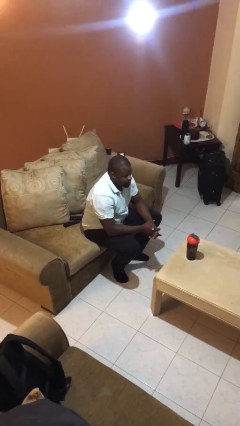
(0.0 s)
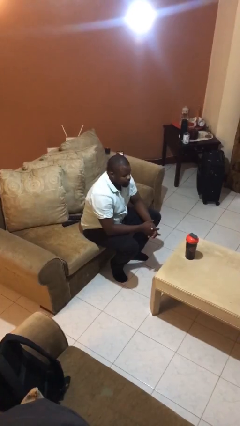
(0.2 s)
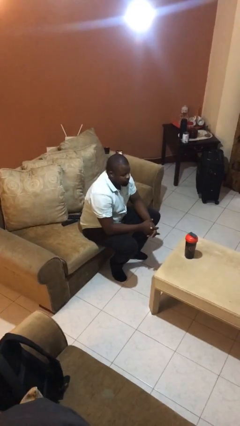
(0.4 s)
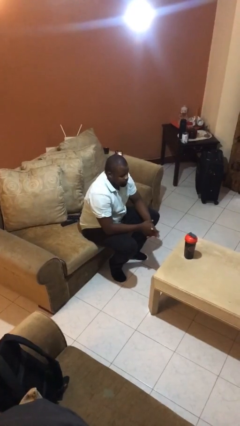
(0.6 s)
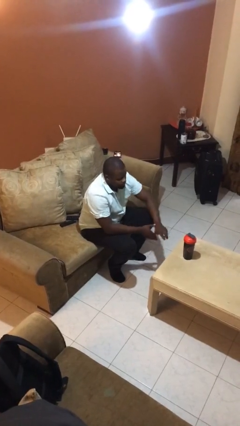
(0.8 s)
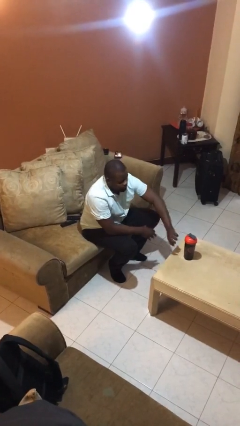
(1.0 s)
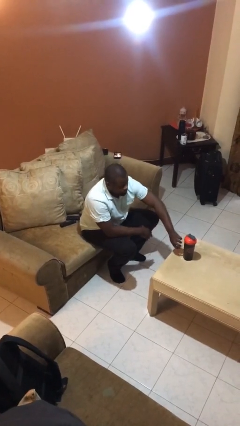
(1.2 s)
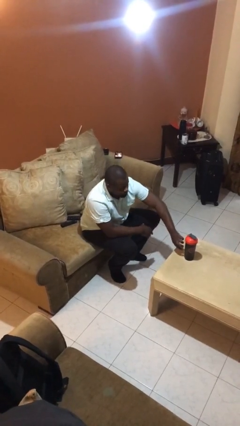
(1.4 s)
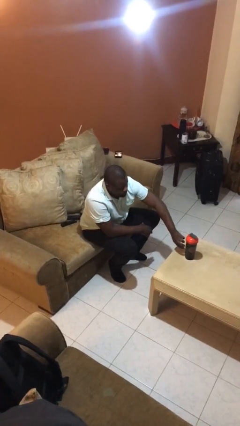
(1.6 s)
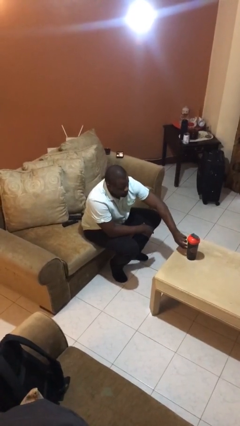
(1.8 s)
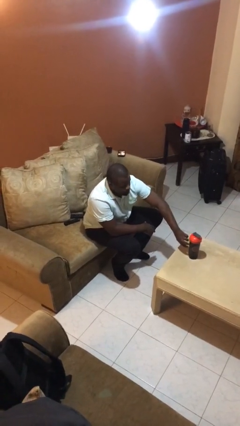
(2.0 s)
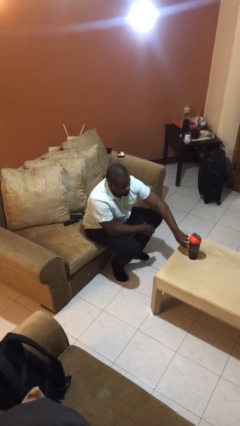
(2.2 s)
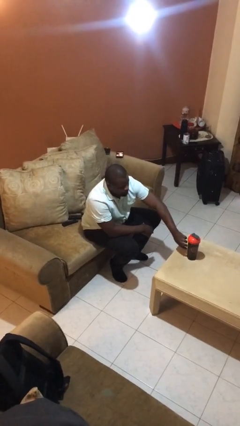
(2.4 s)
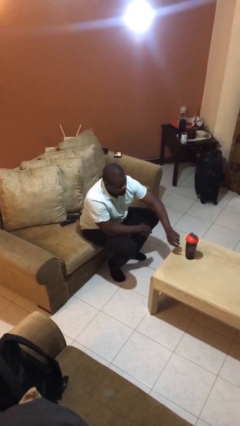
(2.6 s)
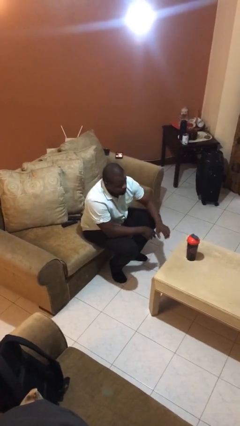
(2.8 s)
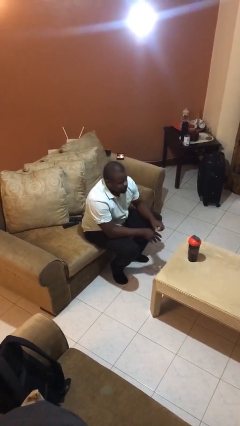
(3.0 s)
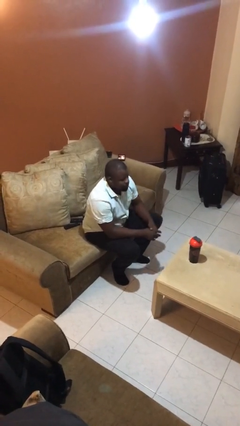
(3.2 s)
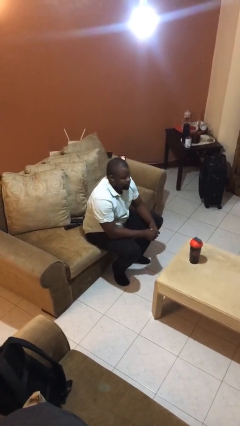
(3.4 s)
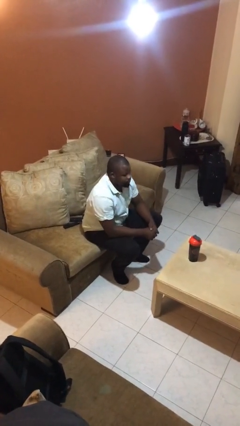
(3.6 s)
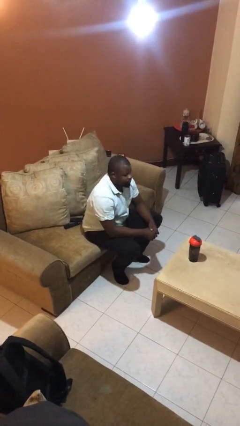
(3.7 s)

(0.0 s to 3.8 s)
person taps object with finger

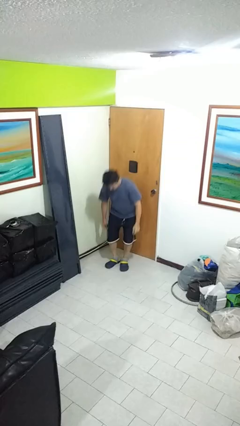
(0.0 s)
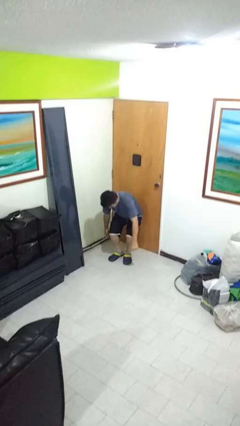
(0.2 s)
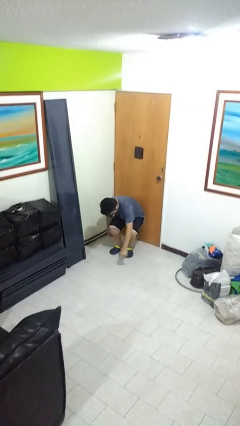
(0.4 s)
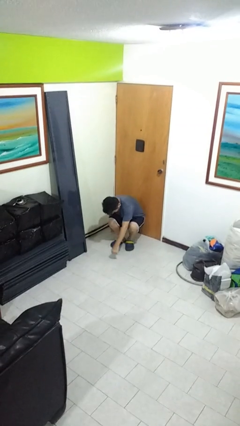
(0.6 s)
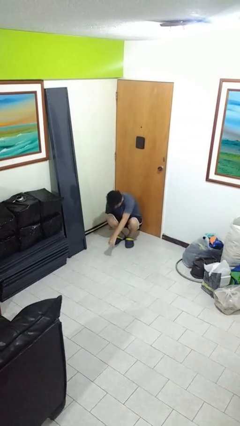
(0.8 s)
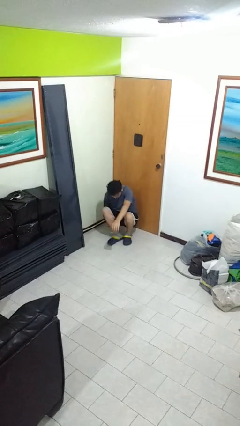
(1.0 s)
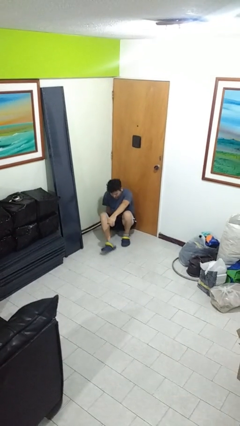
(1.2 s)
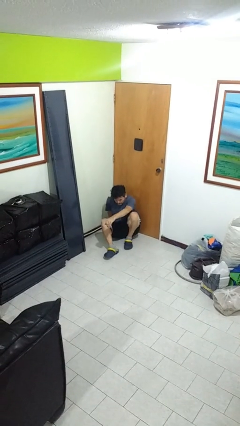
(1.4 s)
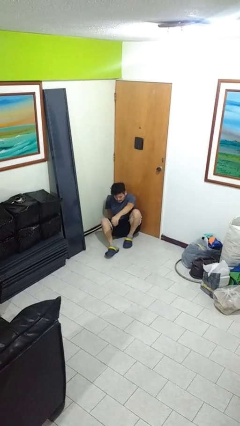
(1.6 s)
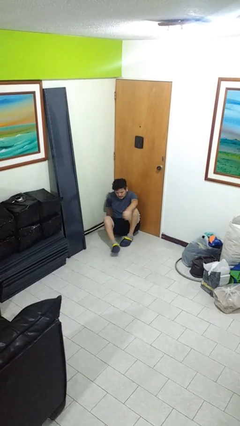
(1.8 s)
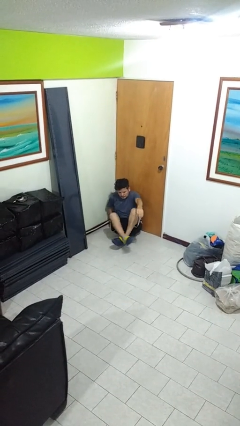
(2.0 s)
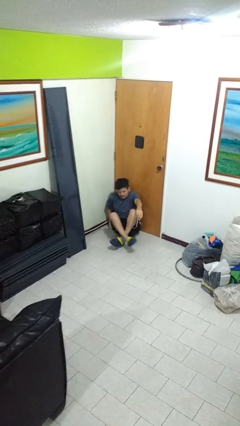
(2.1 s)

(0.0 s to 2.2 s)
person sits crisscross

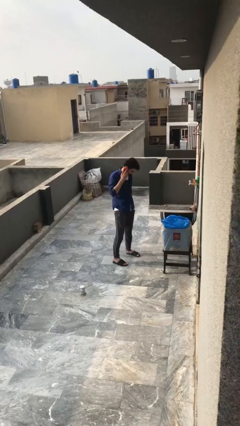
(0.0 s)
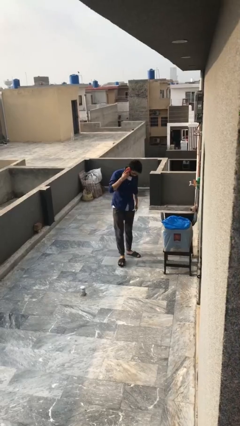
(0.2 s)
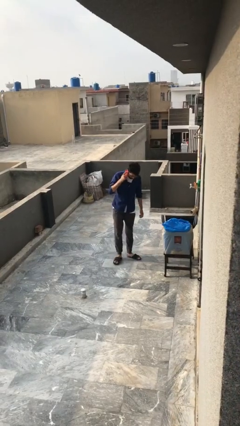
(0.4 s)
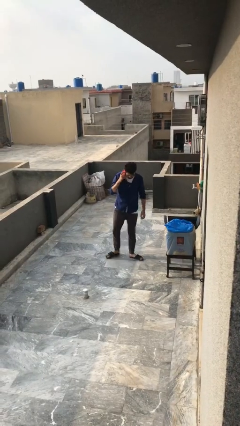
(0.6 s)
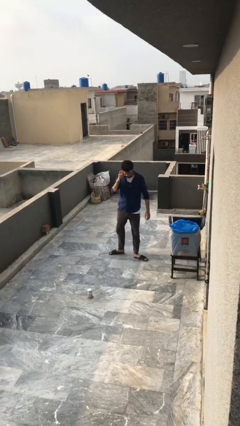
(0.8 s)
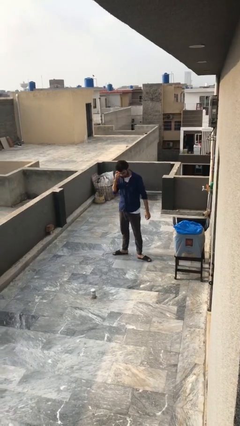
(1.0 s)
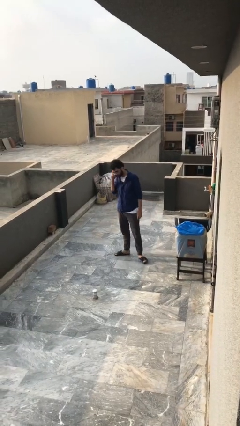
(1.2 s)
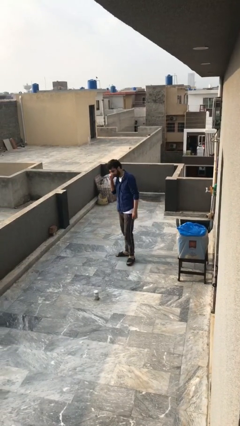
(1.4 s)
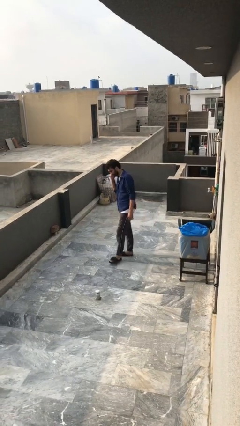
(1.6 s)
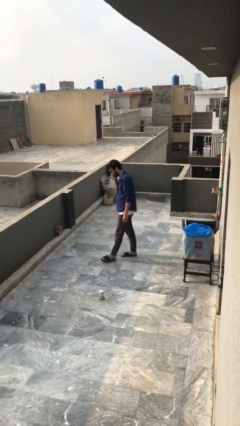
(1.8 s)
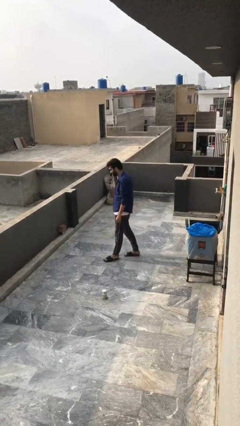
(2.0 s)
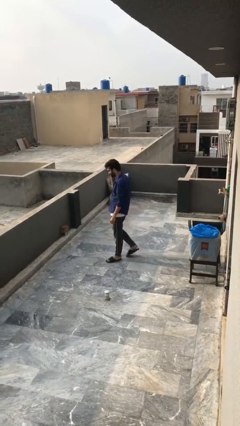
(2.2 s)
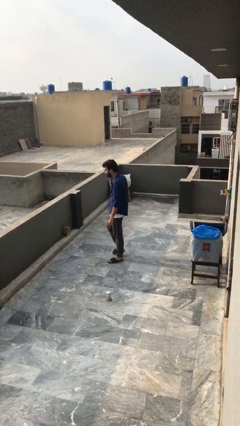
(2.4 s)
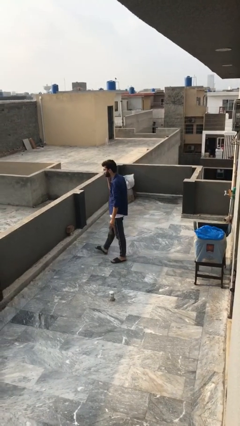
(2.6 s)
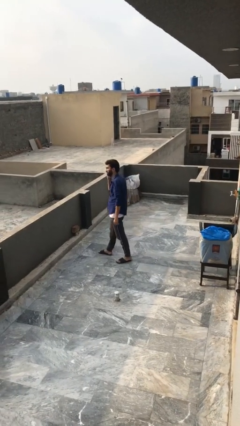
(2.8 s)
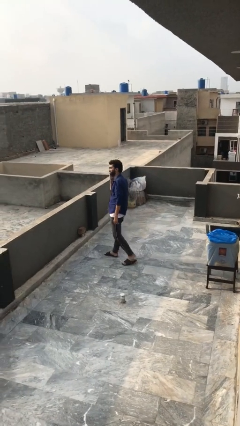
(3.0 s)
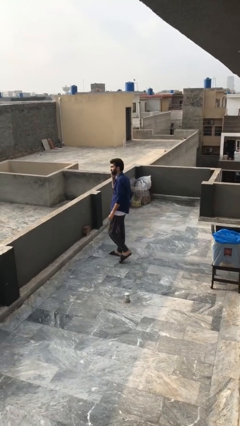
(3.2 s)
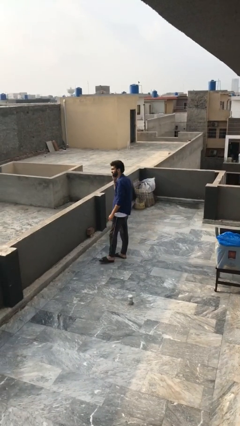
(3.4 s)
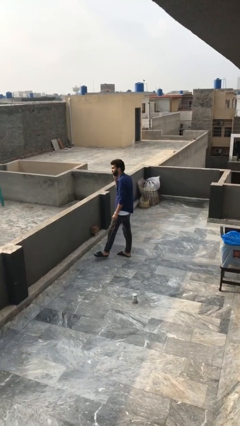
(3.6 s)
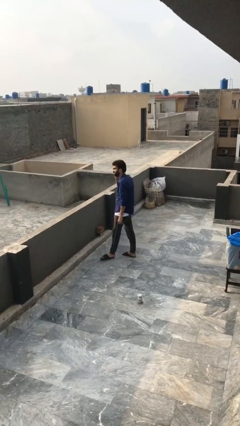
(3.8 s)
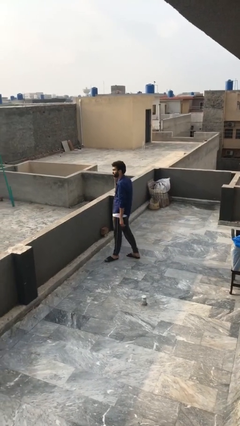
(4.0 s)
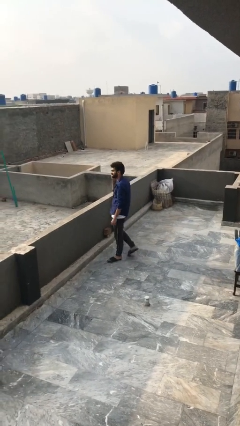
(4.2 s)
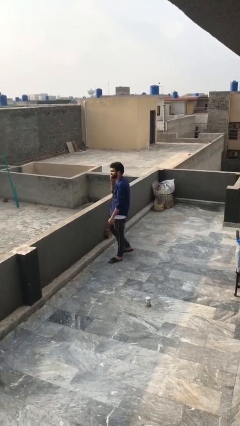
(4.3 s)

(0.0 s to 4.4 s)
person talks on phone

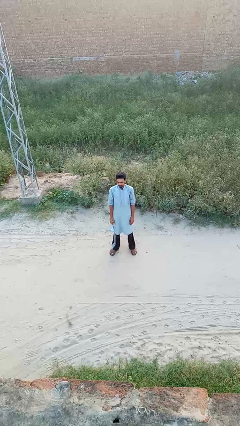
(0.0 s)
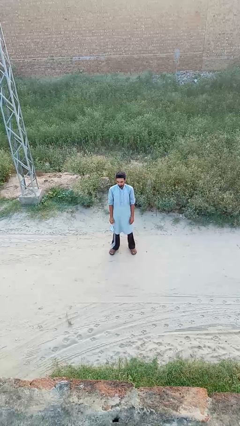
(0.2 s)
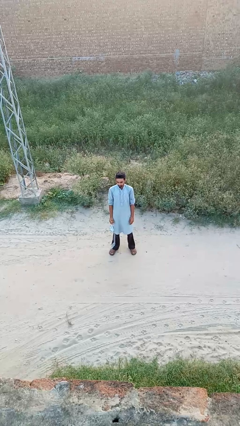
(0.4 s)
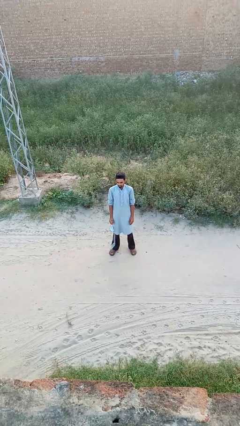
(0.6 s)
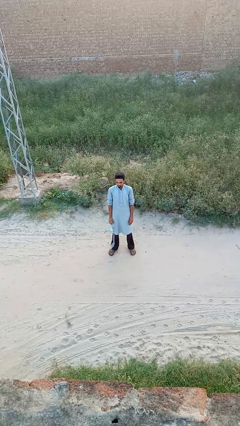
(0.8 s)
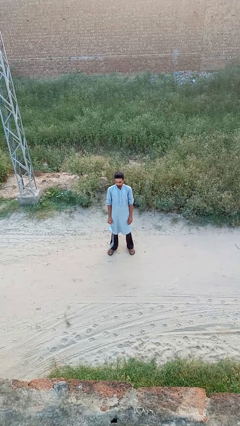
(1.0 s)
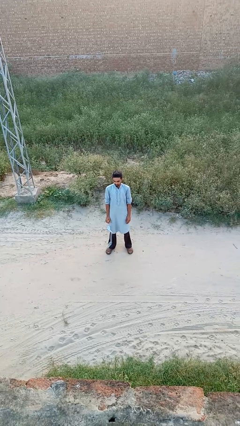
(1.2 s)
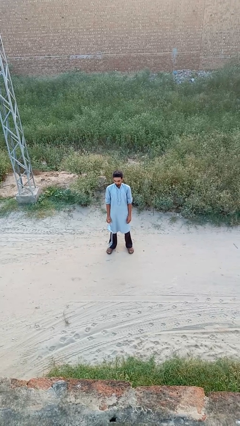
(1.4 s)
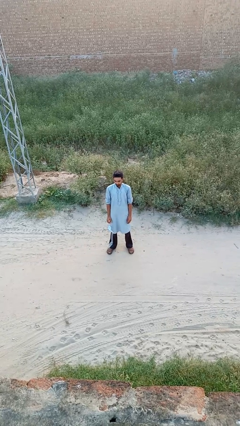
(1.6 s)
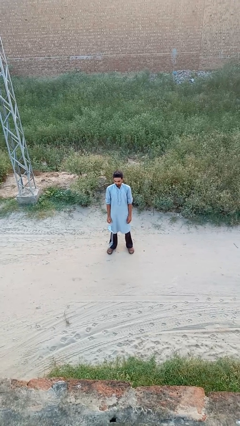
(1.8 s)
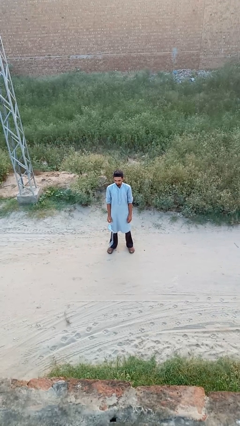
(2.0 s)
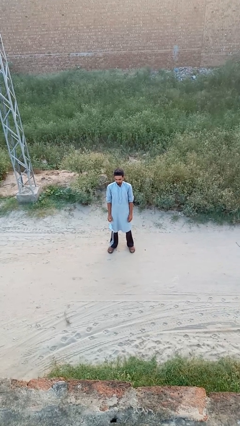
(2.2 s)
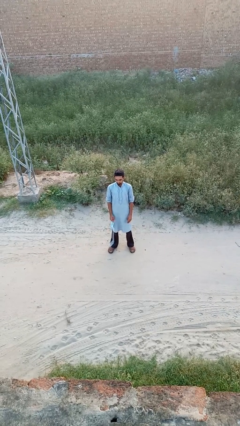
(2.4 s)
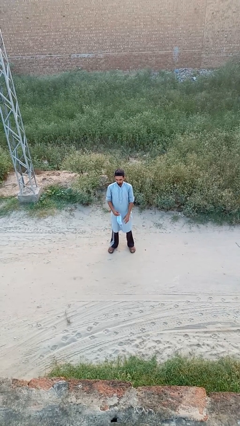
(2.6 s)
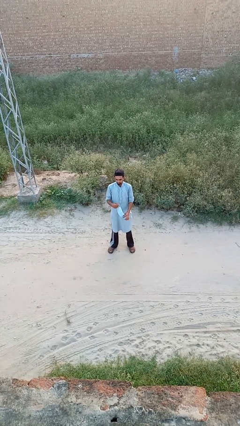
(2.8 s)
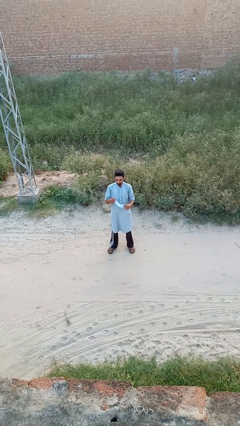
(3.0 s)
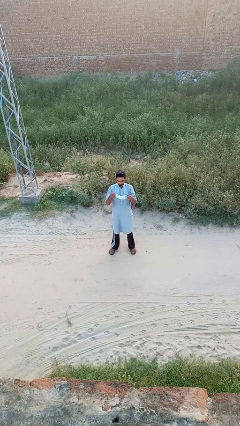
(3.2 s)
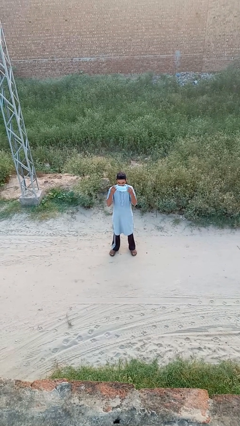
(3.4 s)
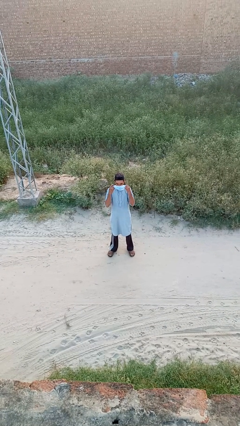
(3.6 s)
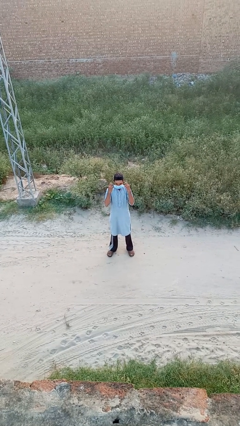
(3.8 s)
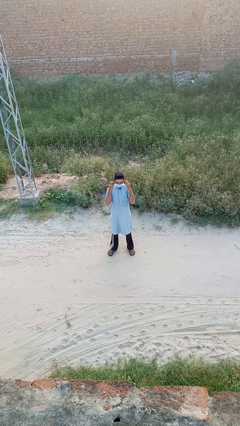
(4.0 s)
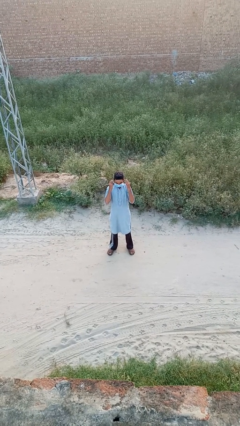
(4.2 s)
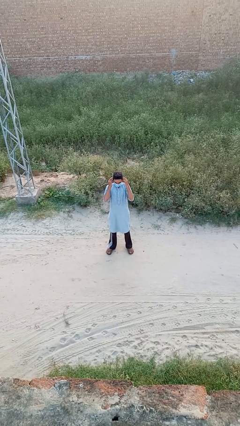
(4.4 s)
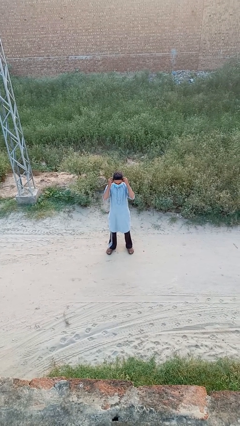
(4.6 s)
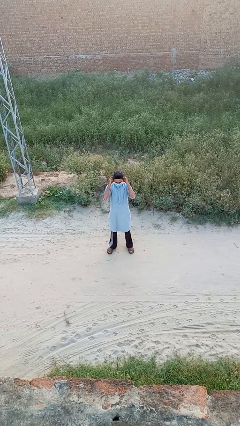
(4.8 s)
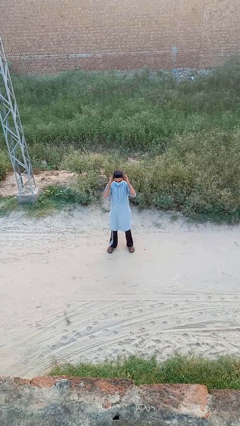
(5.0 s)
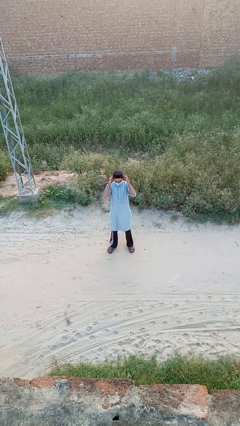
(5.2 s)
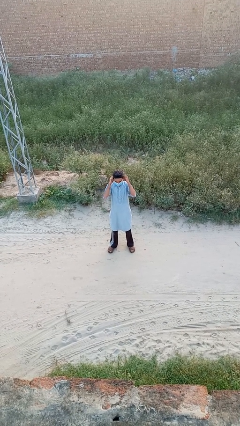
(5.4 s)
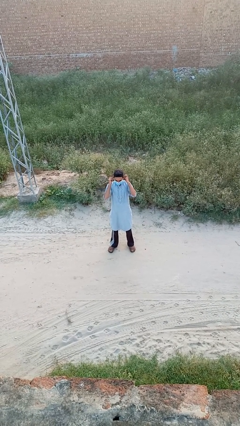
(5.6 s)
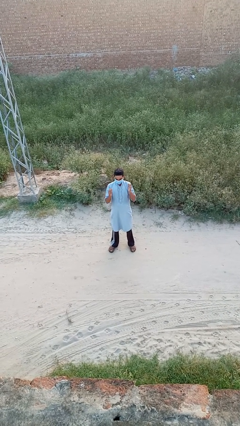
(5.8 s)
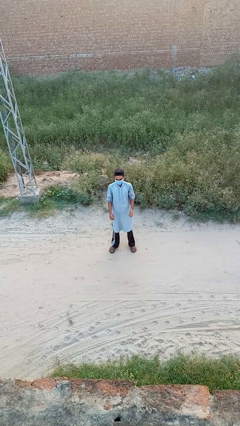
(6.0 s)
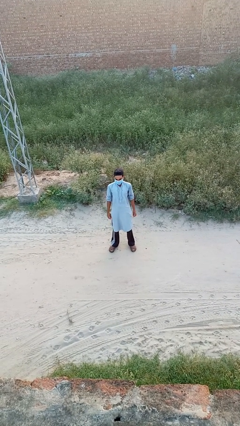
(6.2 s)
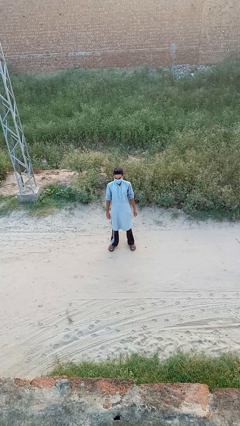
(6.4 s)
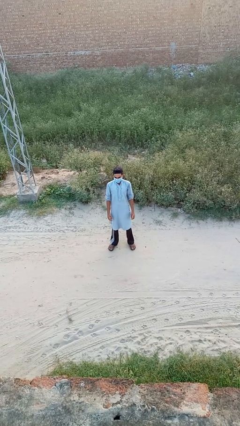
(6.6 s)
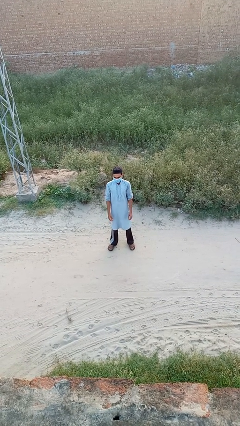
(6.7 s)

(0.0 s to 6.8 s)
person puts on facemask

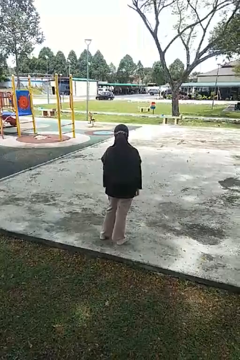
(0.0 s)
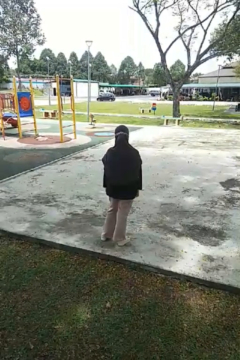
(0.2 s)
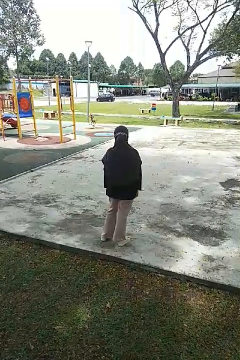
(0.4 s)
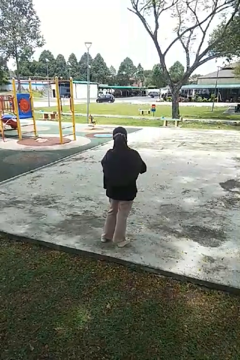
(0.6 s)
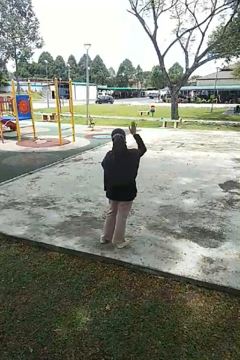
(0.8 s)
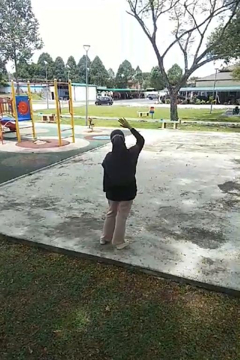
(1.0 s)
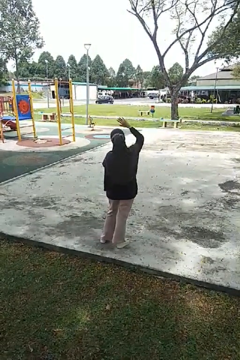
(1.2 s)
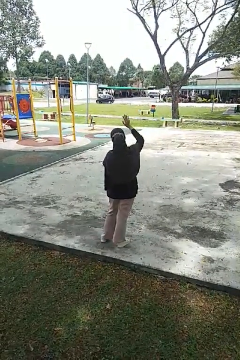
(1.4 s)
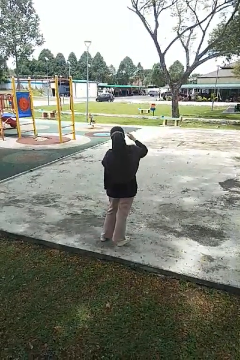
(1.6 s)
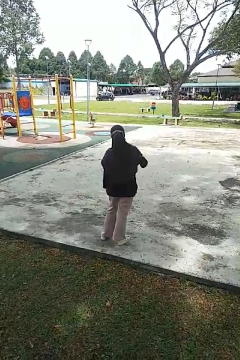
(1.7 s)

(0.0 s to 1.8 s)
person waves at person
